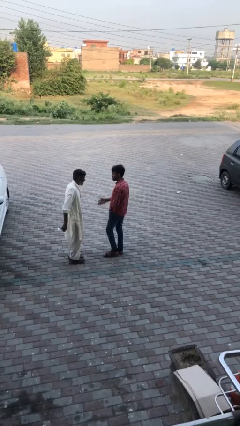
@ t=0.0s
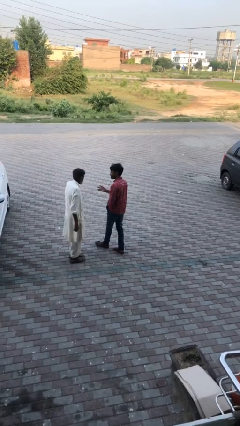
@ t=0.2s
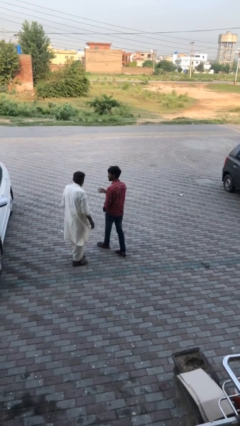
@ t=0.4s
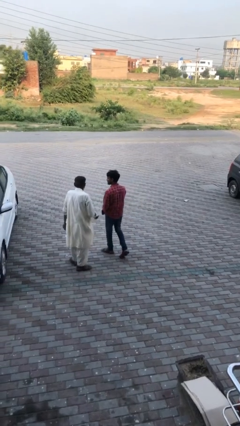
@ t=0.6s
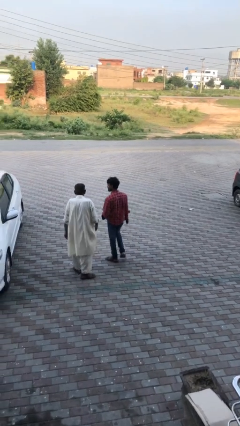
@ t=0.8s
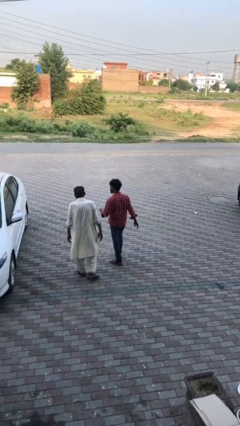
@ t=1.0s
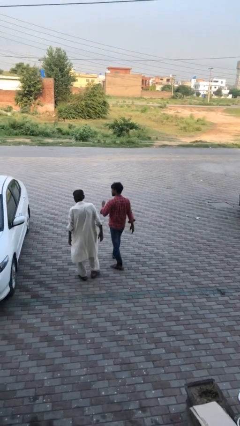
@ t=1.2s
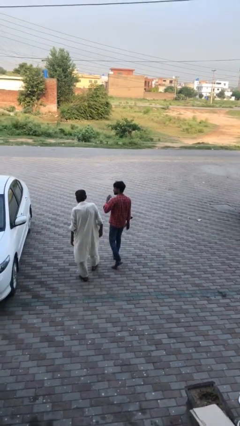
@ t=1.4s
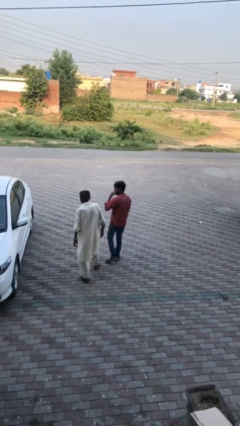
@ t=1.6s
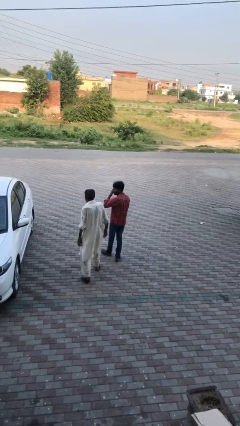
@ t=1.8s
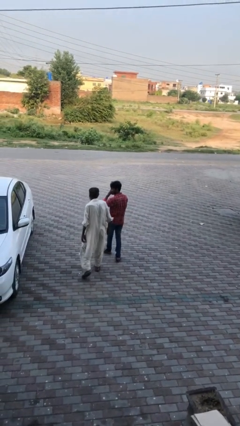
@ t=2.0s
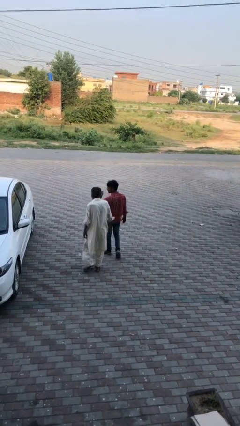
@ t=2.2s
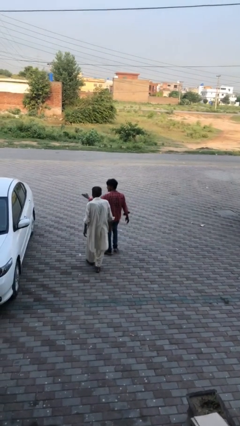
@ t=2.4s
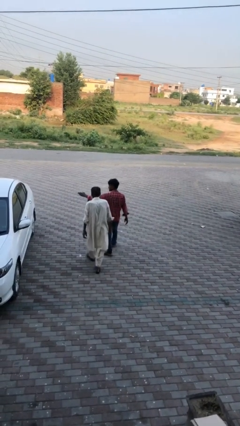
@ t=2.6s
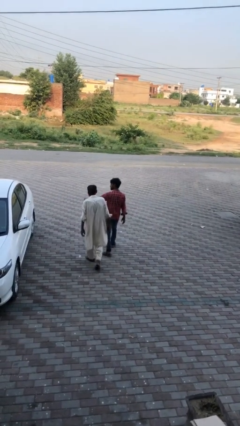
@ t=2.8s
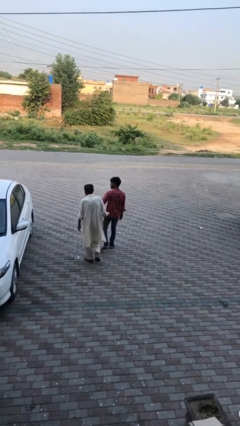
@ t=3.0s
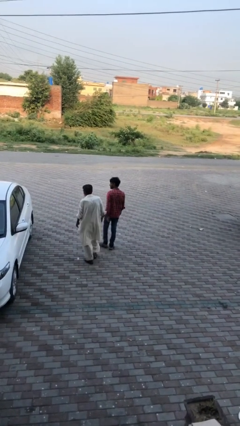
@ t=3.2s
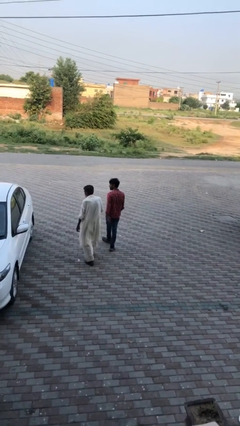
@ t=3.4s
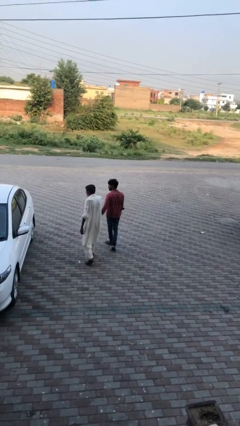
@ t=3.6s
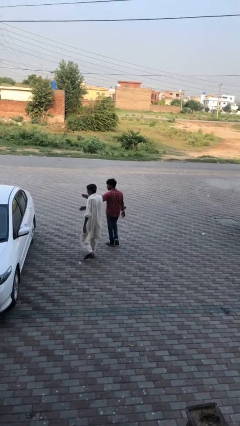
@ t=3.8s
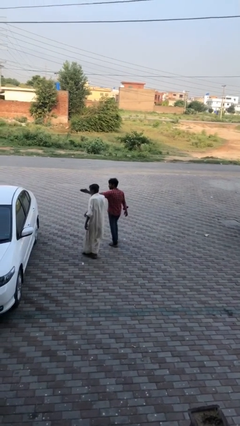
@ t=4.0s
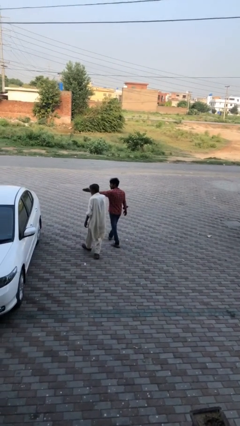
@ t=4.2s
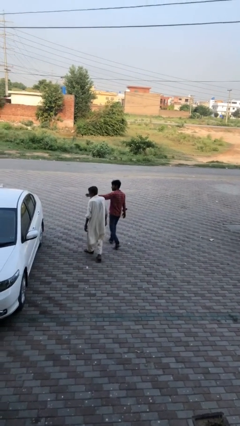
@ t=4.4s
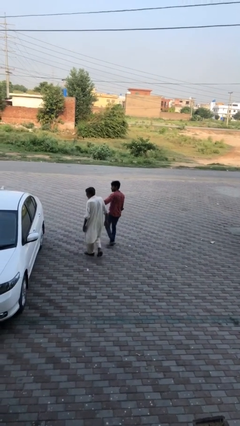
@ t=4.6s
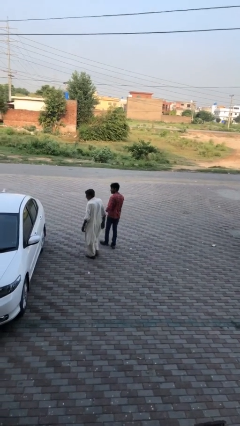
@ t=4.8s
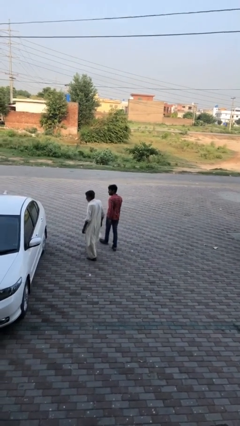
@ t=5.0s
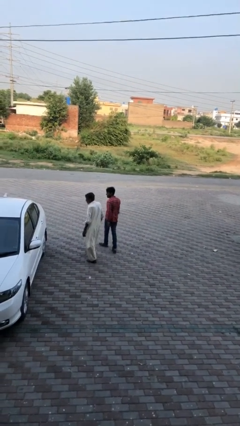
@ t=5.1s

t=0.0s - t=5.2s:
person talks to person

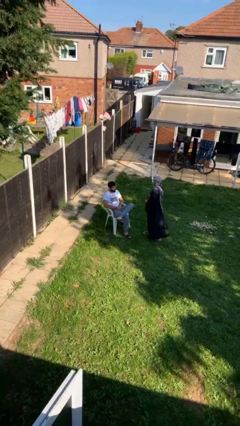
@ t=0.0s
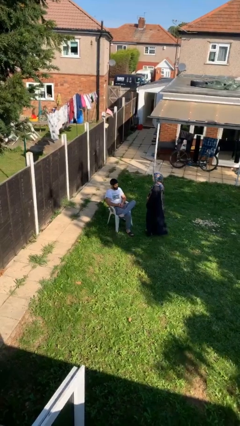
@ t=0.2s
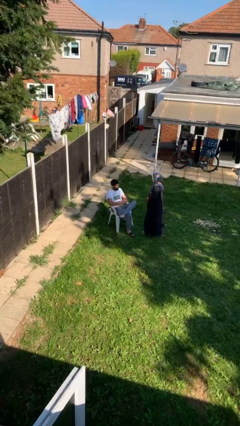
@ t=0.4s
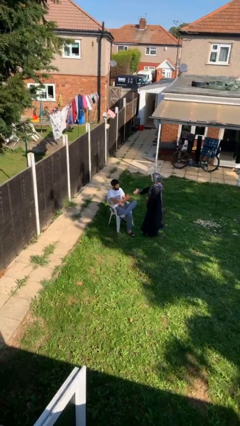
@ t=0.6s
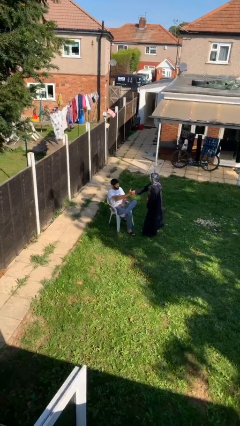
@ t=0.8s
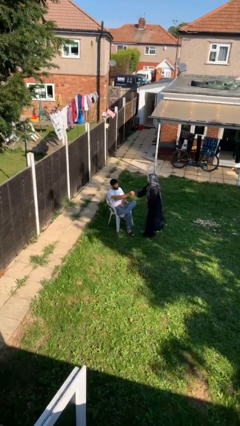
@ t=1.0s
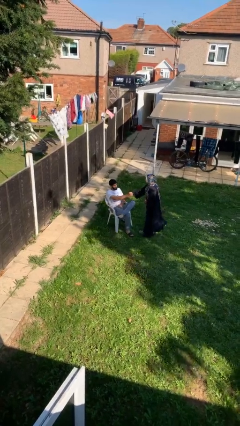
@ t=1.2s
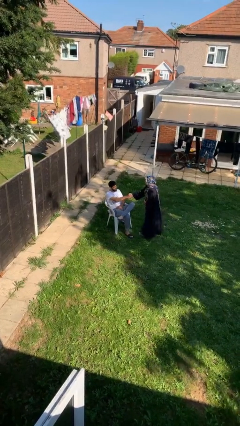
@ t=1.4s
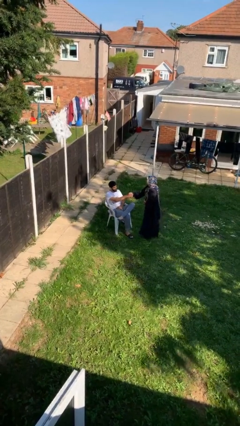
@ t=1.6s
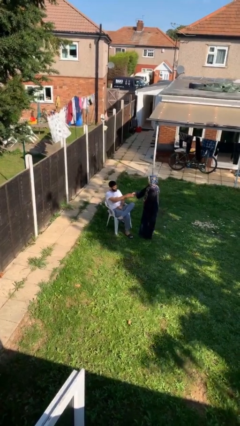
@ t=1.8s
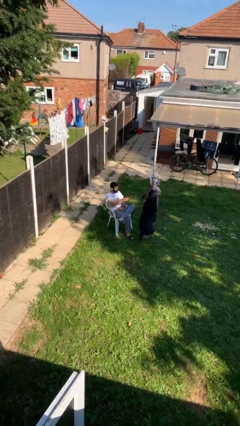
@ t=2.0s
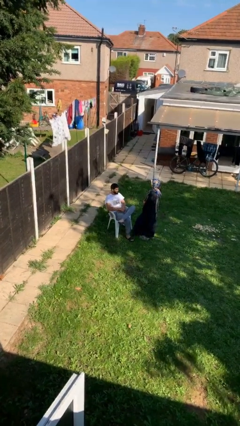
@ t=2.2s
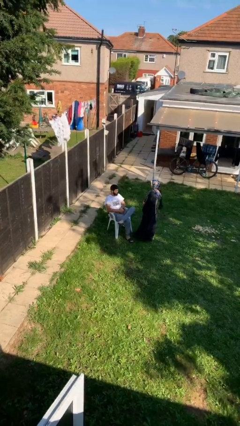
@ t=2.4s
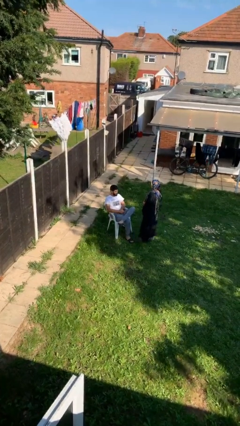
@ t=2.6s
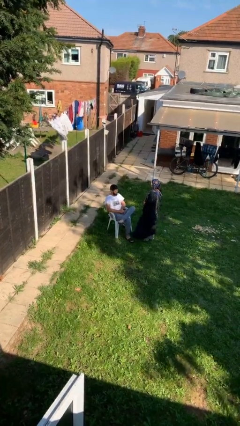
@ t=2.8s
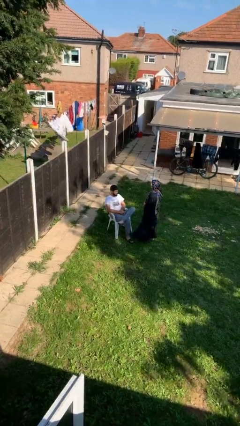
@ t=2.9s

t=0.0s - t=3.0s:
person shakes hand

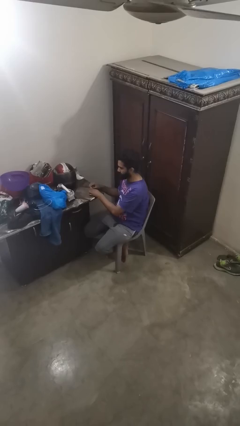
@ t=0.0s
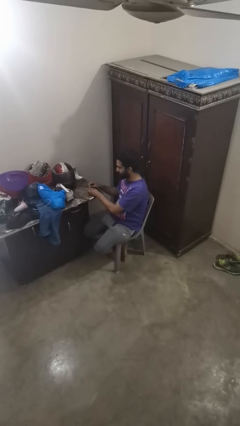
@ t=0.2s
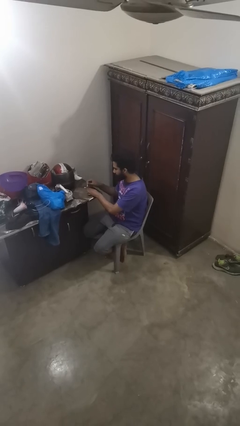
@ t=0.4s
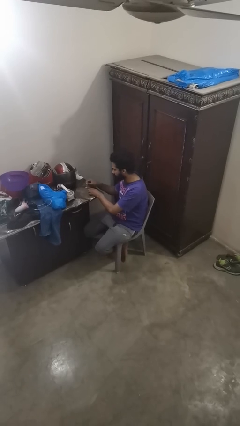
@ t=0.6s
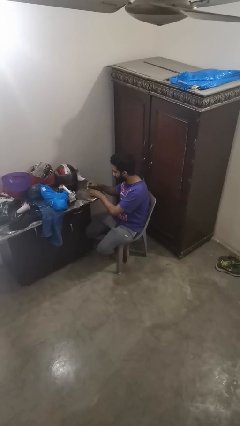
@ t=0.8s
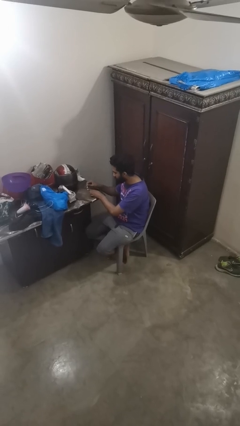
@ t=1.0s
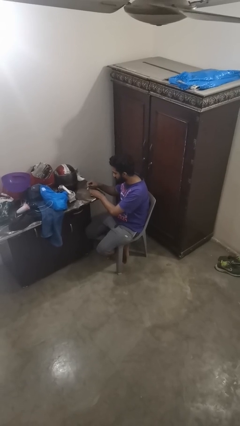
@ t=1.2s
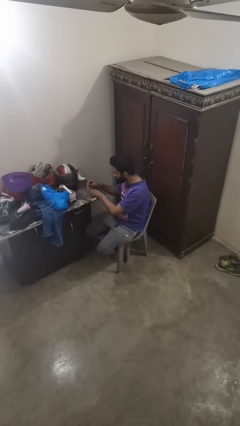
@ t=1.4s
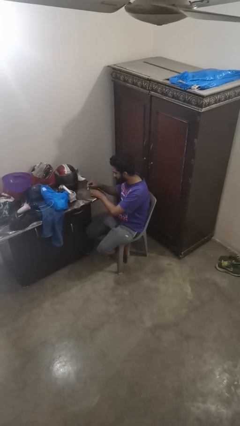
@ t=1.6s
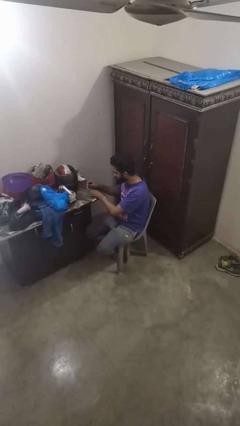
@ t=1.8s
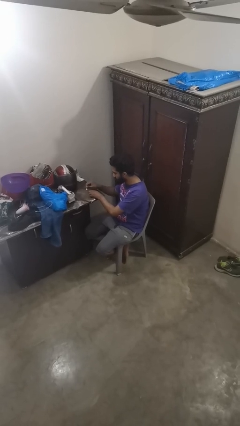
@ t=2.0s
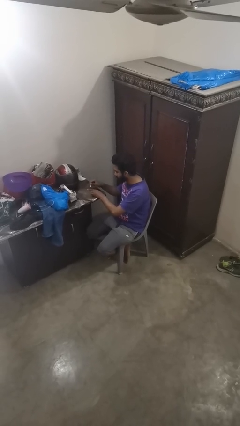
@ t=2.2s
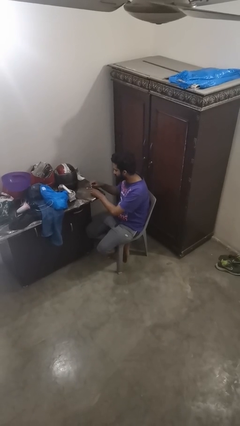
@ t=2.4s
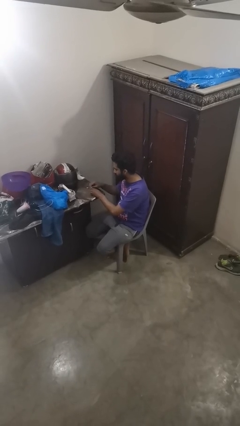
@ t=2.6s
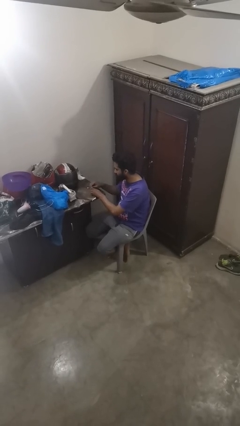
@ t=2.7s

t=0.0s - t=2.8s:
person paints fingernails

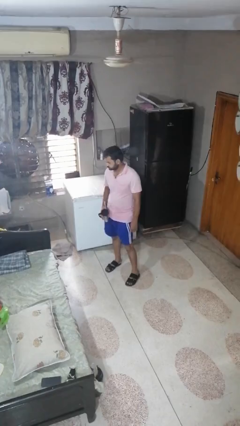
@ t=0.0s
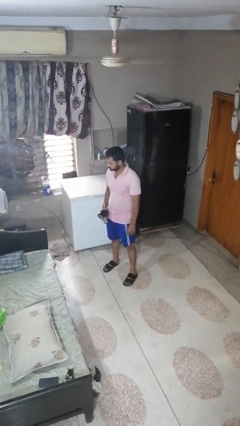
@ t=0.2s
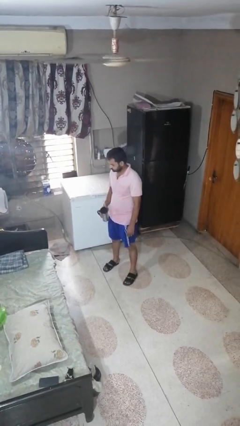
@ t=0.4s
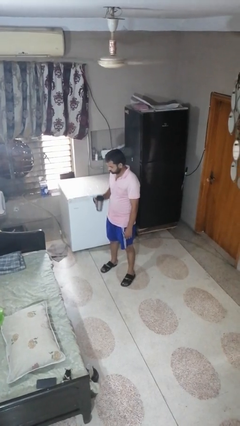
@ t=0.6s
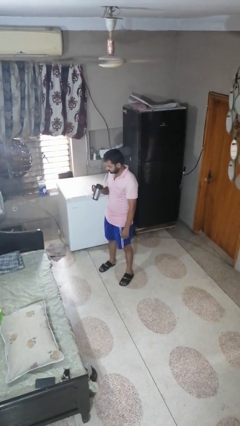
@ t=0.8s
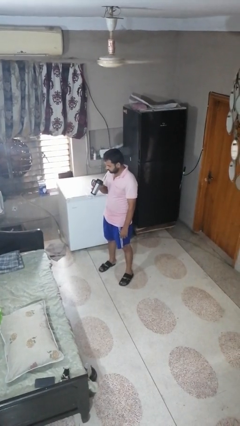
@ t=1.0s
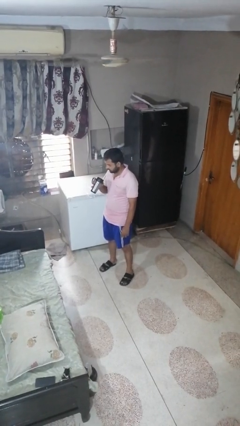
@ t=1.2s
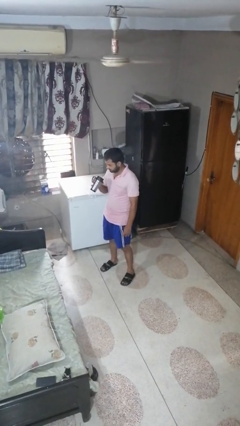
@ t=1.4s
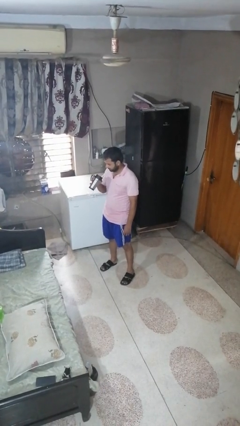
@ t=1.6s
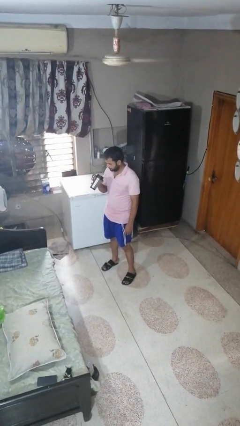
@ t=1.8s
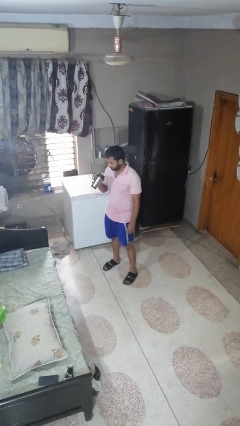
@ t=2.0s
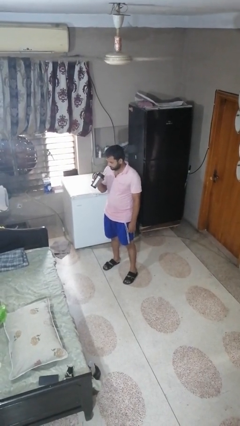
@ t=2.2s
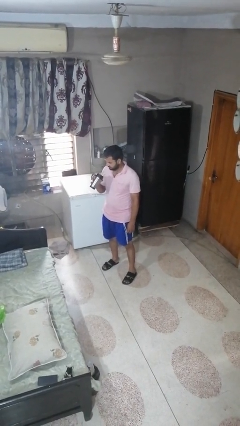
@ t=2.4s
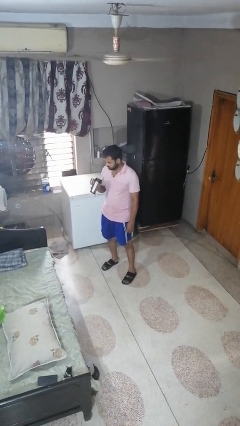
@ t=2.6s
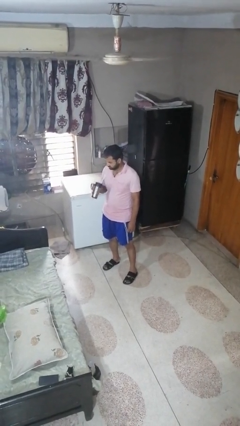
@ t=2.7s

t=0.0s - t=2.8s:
person drinks from straw

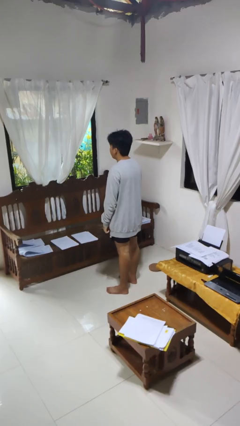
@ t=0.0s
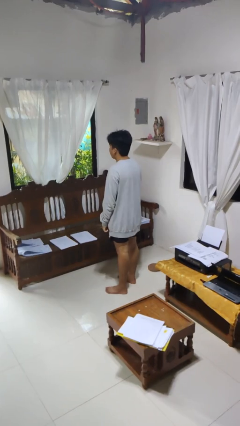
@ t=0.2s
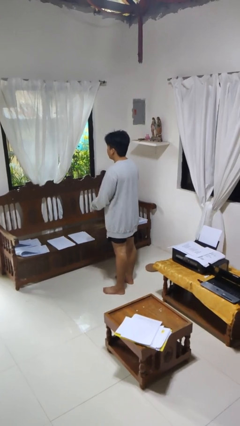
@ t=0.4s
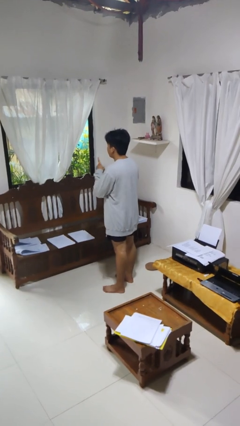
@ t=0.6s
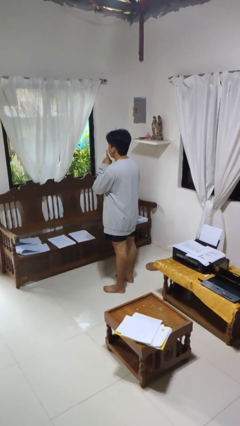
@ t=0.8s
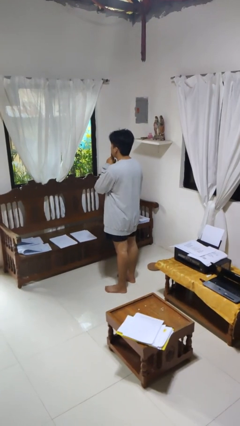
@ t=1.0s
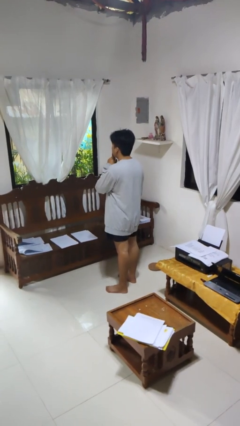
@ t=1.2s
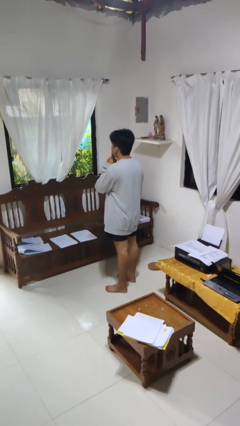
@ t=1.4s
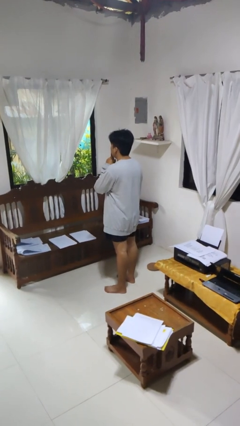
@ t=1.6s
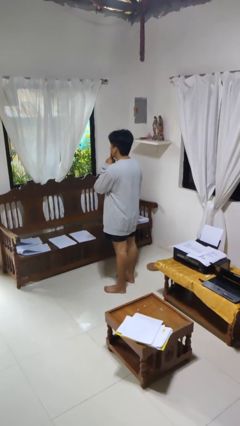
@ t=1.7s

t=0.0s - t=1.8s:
person gestures be quiet

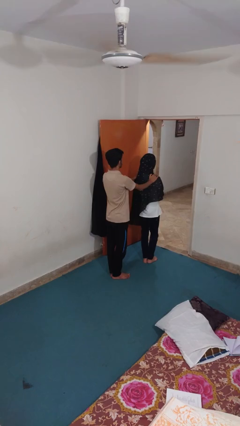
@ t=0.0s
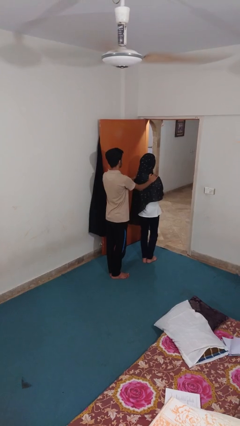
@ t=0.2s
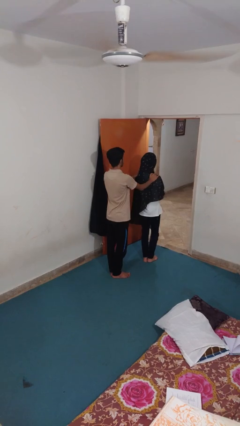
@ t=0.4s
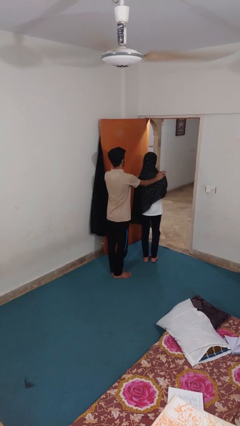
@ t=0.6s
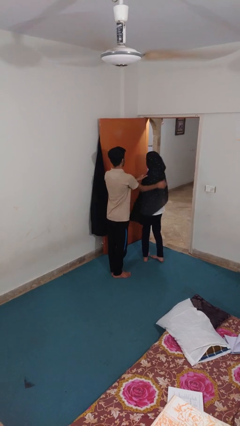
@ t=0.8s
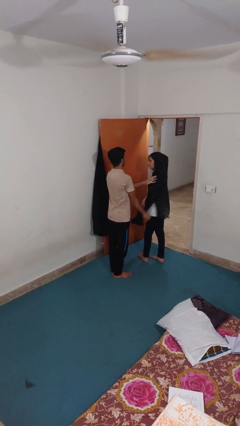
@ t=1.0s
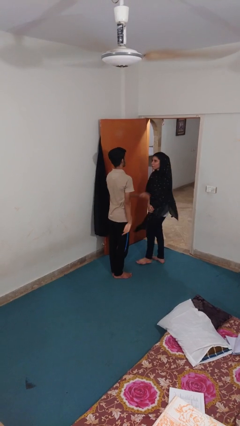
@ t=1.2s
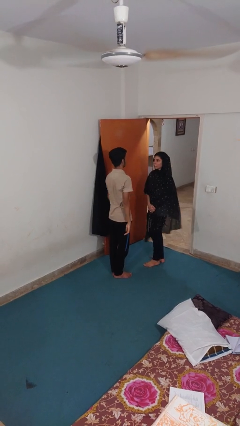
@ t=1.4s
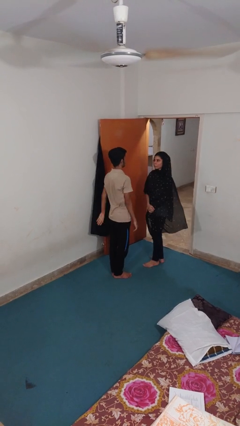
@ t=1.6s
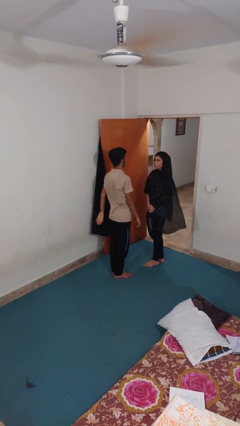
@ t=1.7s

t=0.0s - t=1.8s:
person spins person around

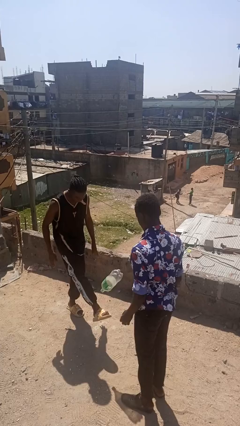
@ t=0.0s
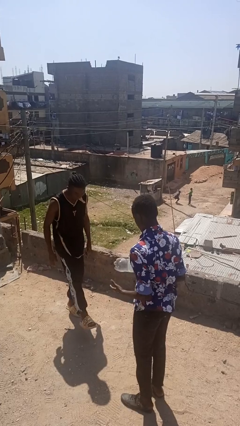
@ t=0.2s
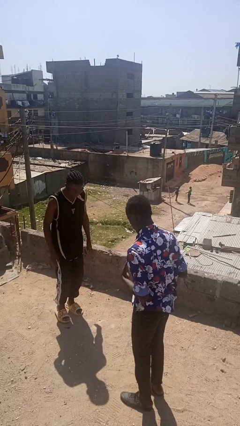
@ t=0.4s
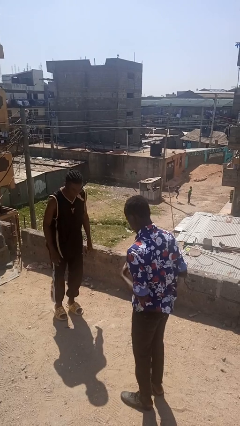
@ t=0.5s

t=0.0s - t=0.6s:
person kicks object to person
